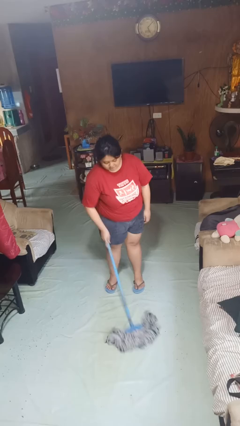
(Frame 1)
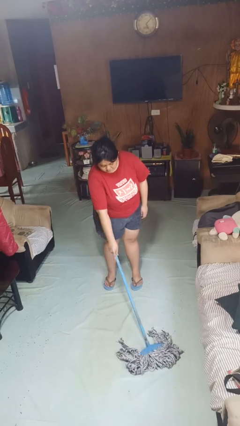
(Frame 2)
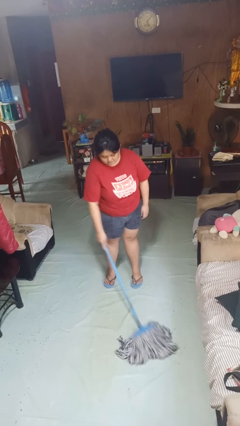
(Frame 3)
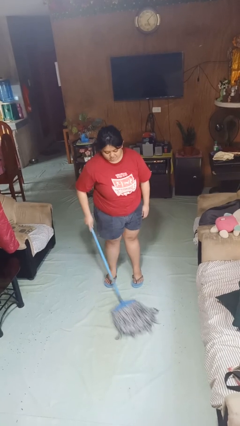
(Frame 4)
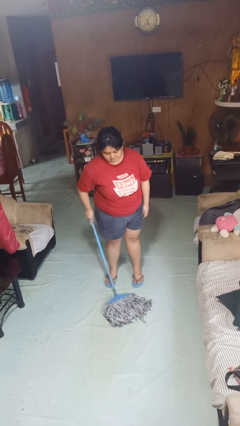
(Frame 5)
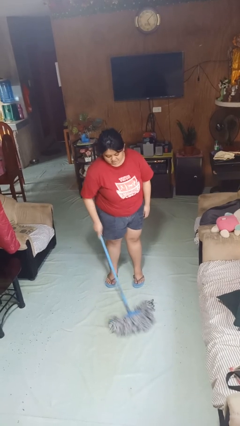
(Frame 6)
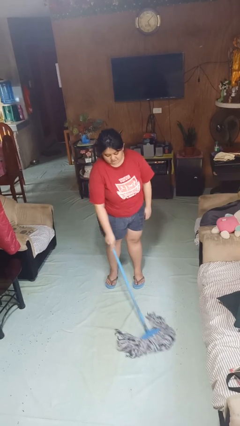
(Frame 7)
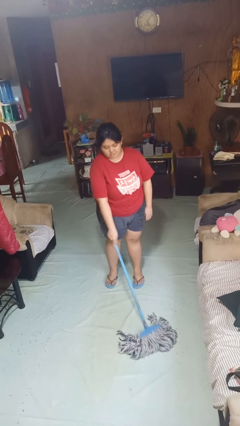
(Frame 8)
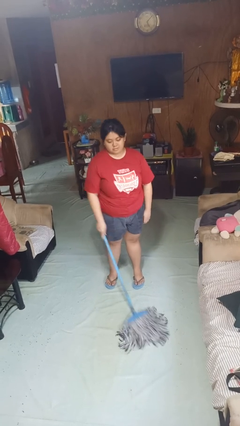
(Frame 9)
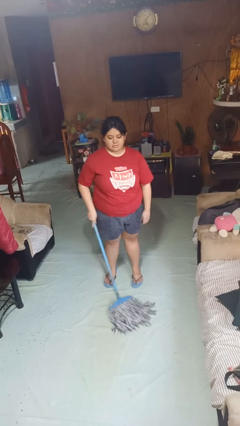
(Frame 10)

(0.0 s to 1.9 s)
person mops

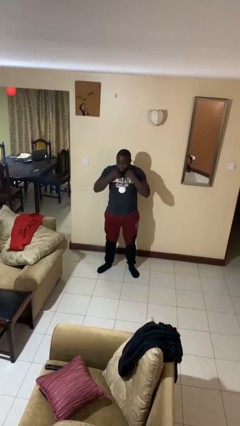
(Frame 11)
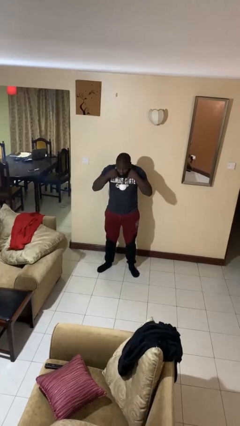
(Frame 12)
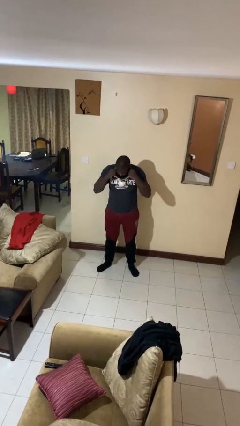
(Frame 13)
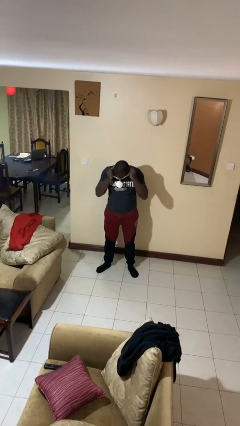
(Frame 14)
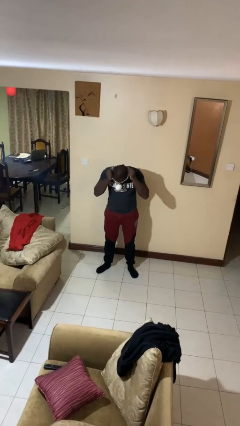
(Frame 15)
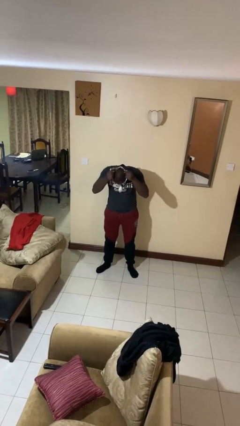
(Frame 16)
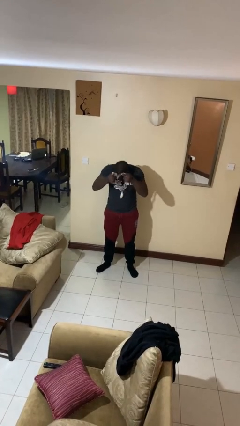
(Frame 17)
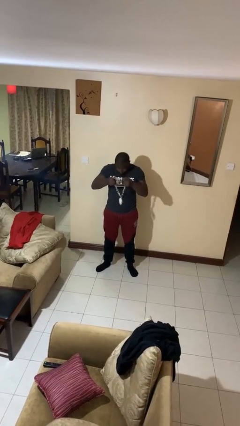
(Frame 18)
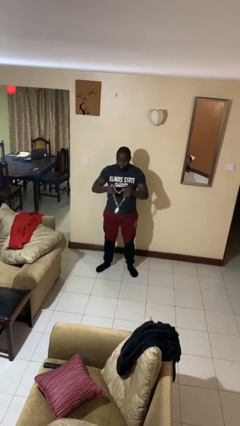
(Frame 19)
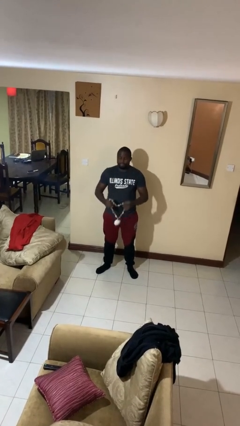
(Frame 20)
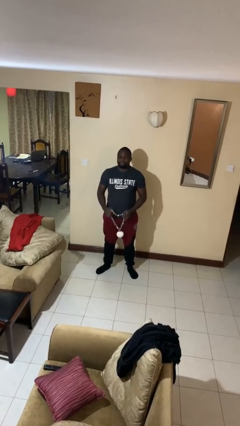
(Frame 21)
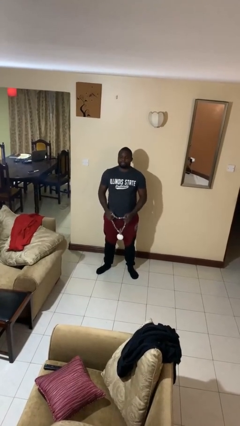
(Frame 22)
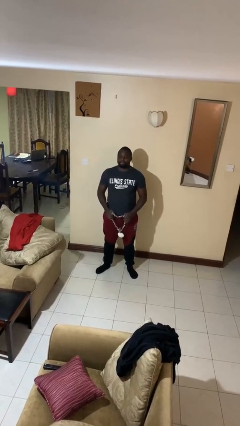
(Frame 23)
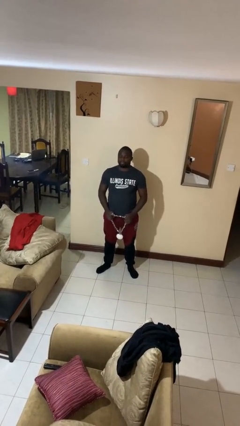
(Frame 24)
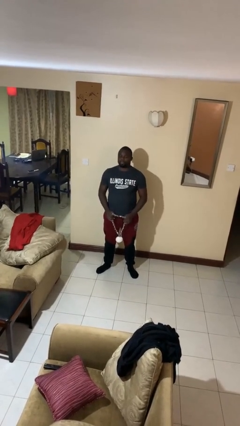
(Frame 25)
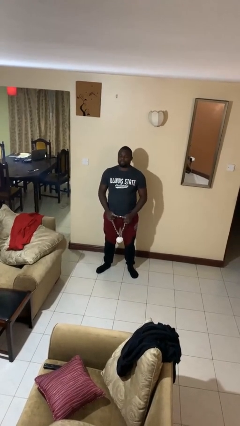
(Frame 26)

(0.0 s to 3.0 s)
person takes off necklace

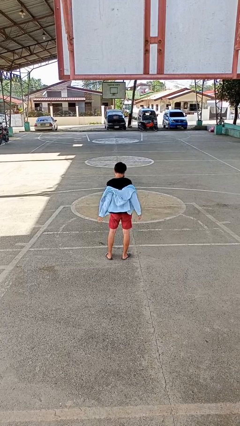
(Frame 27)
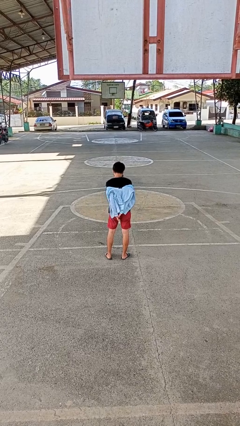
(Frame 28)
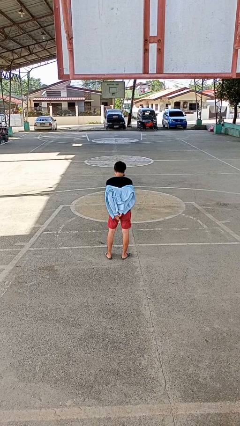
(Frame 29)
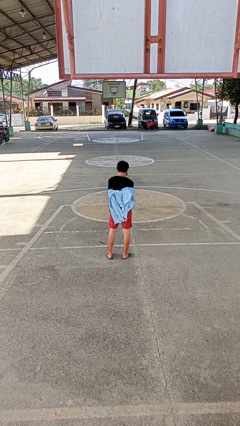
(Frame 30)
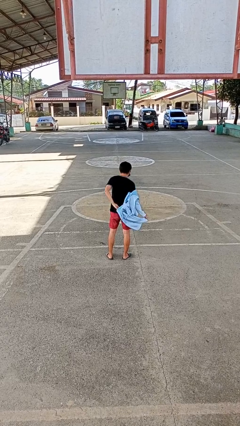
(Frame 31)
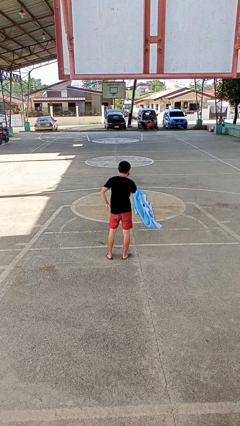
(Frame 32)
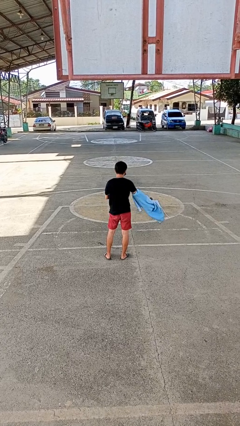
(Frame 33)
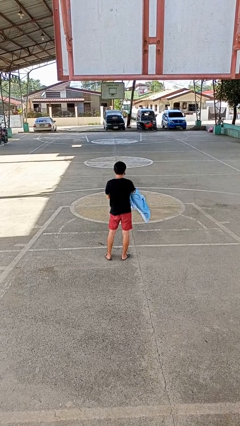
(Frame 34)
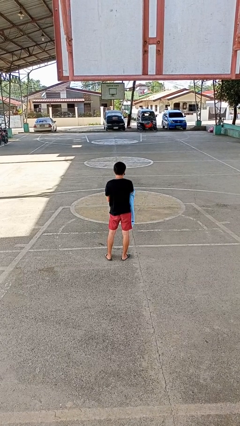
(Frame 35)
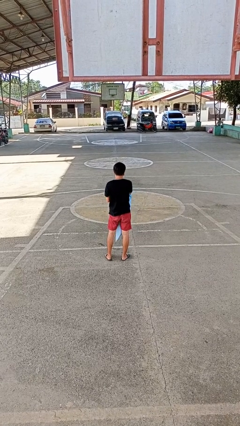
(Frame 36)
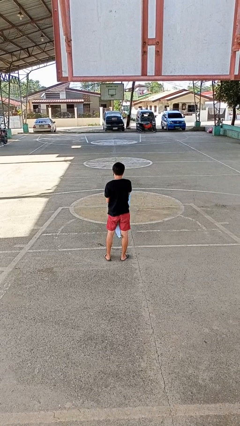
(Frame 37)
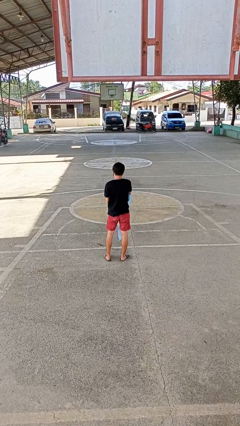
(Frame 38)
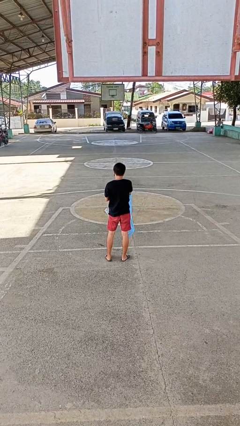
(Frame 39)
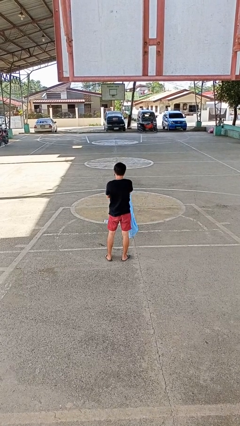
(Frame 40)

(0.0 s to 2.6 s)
person takes off jacket

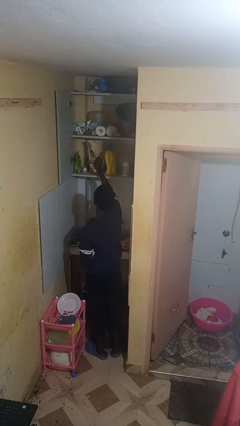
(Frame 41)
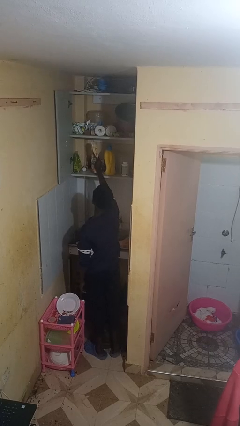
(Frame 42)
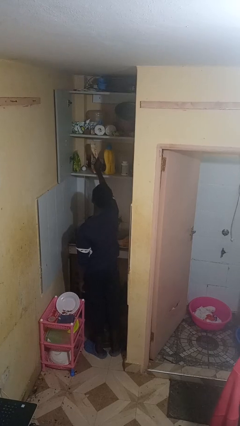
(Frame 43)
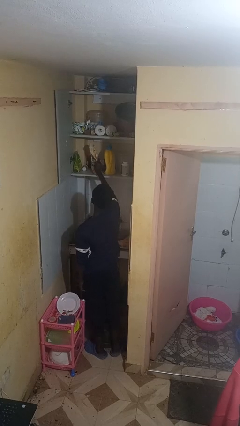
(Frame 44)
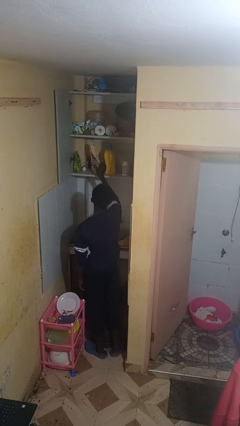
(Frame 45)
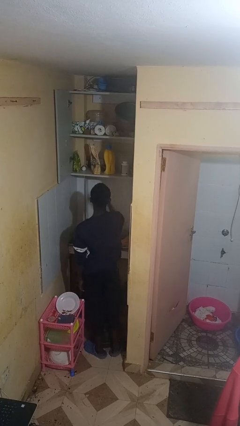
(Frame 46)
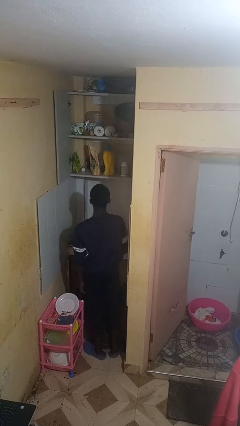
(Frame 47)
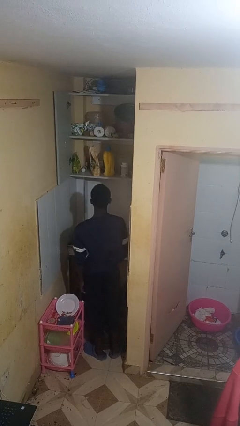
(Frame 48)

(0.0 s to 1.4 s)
person puts object in cabinet

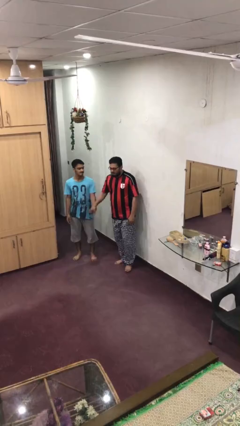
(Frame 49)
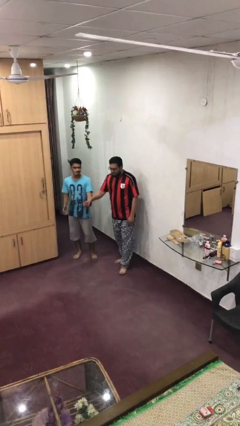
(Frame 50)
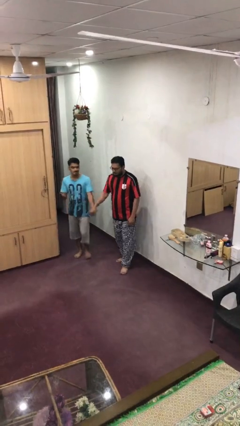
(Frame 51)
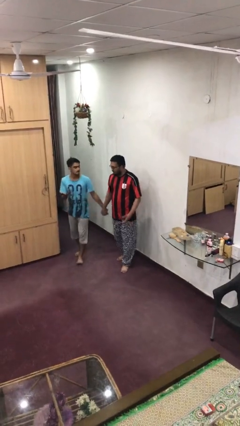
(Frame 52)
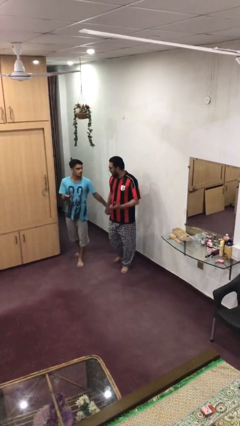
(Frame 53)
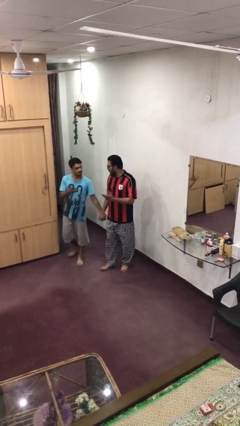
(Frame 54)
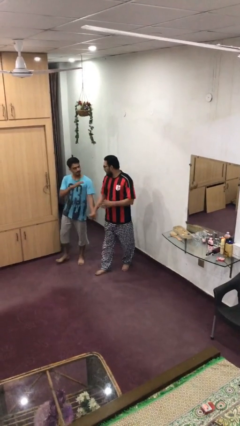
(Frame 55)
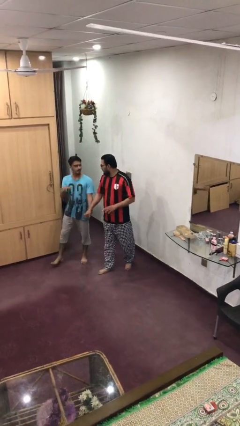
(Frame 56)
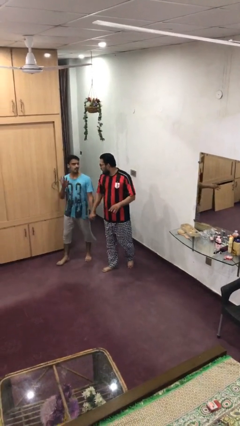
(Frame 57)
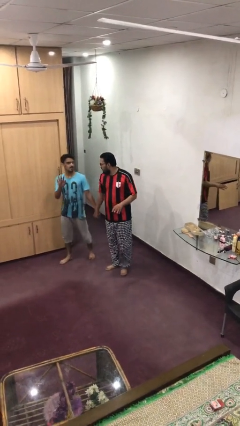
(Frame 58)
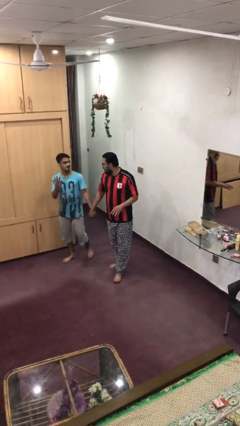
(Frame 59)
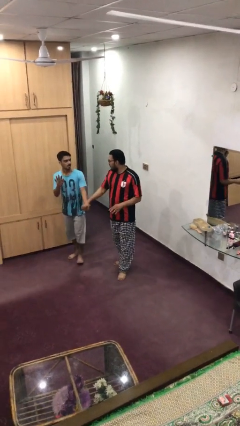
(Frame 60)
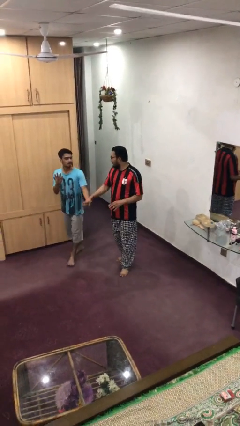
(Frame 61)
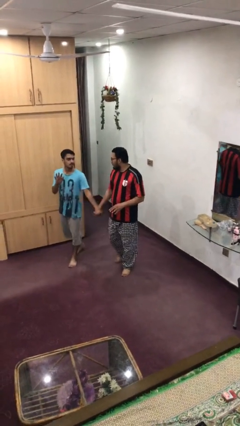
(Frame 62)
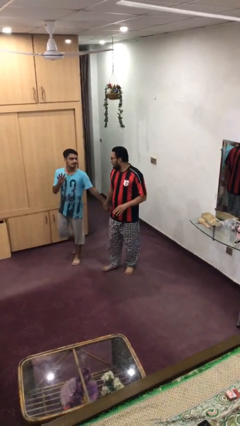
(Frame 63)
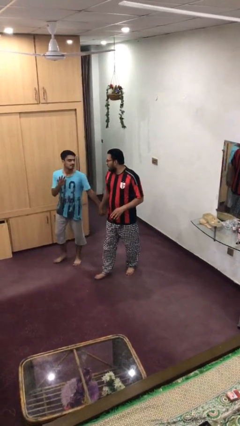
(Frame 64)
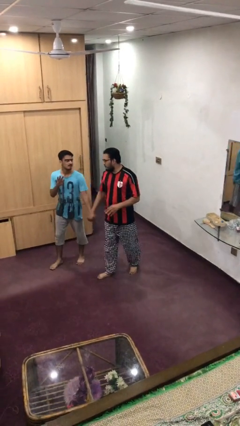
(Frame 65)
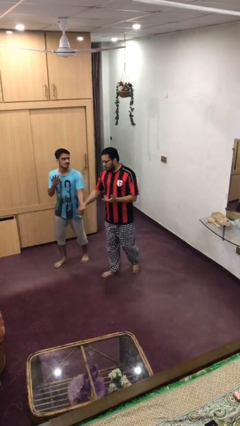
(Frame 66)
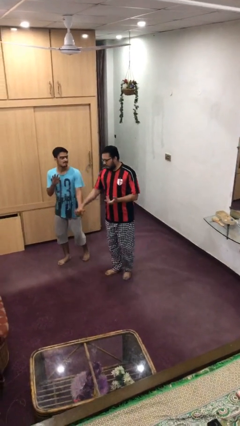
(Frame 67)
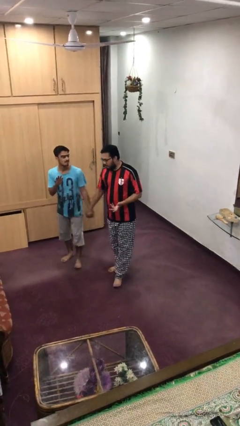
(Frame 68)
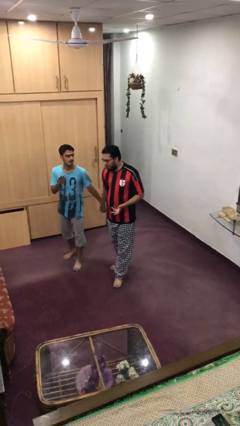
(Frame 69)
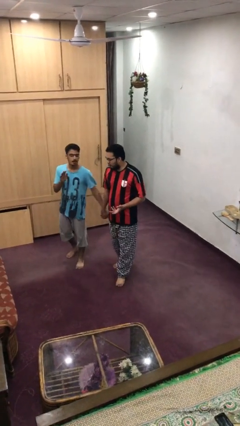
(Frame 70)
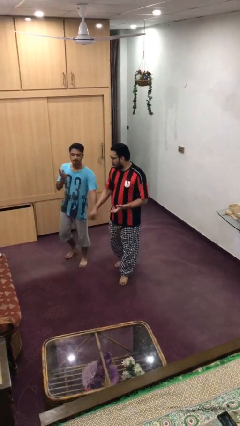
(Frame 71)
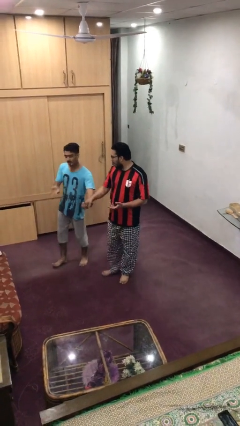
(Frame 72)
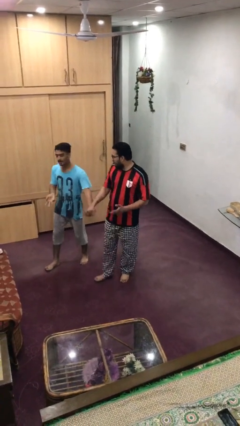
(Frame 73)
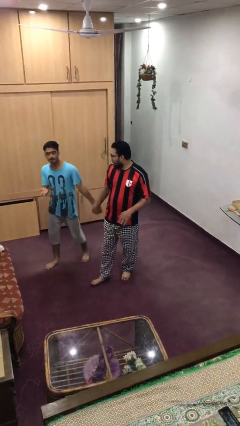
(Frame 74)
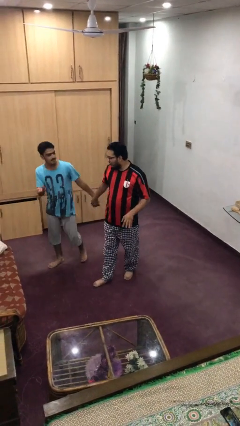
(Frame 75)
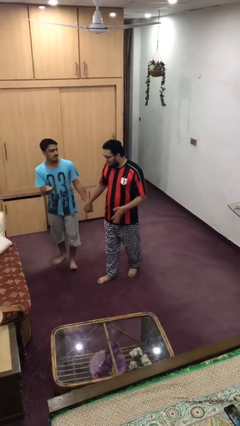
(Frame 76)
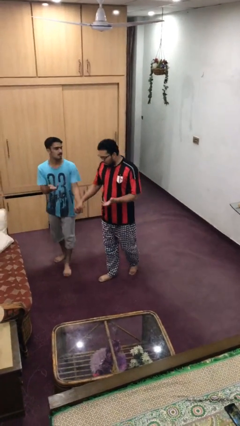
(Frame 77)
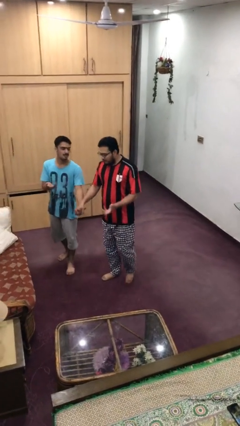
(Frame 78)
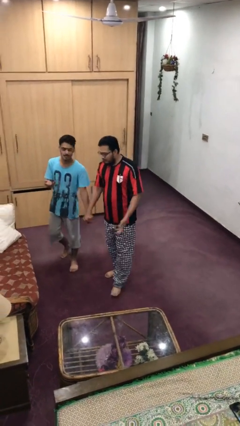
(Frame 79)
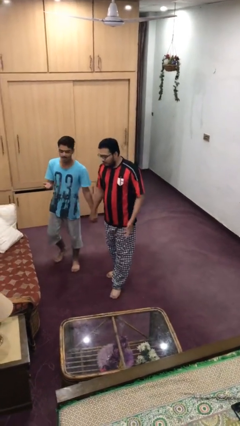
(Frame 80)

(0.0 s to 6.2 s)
person holds hand

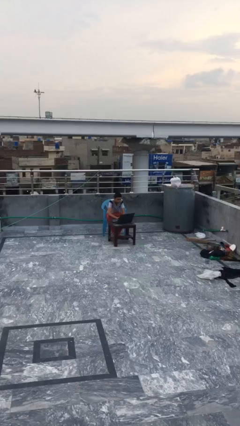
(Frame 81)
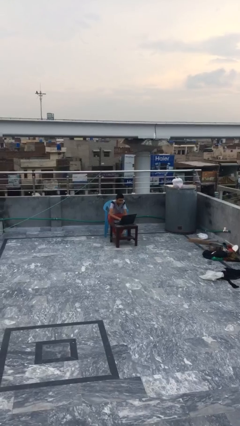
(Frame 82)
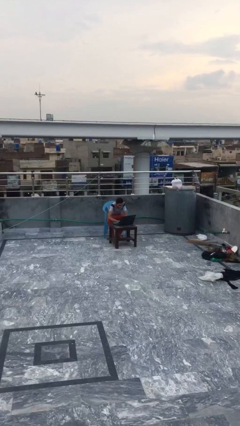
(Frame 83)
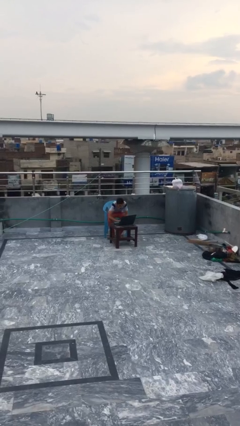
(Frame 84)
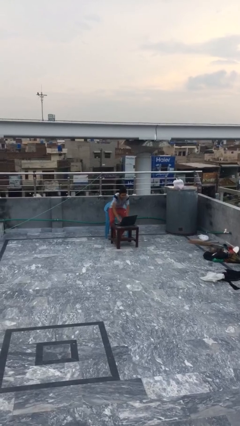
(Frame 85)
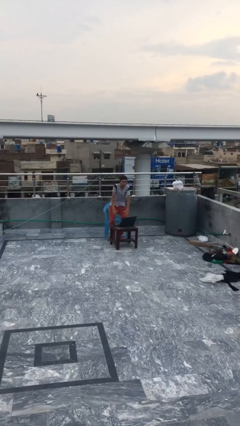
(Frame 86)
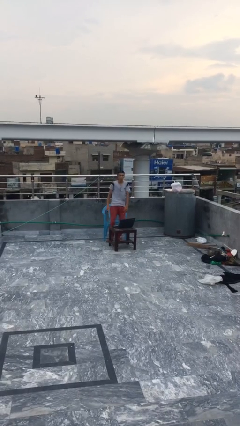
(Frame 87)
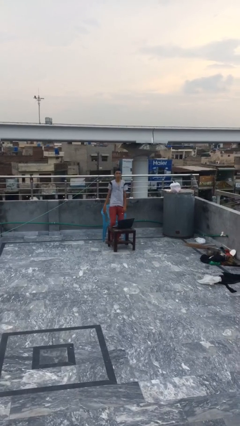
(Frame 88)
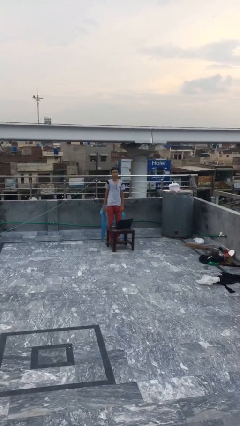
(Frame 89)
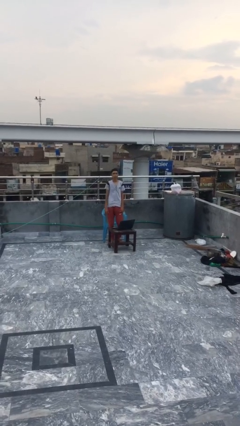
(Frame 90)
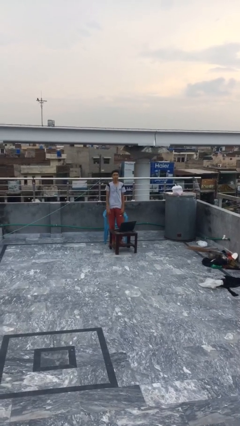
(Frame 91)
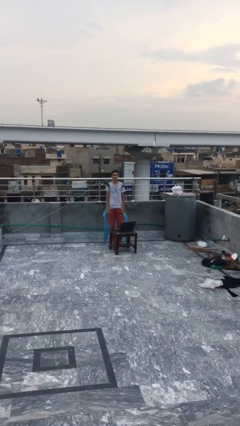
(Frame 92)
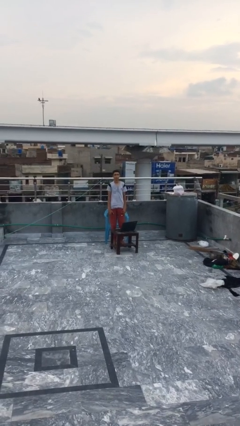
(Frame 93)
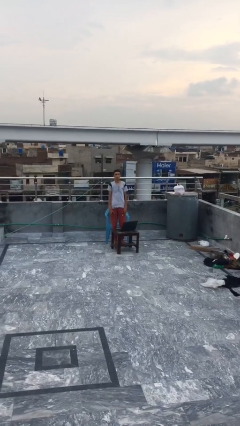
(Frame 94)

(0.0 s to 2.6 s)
person stands up
